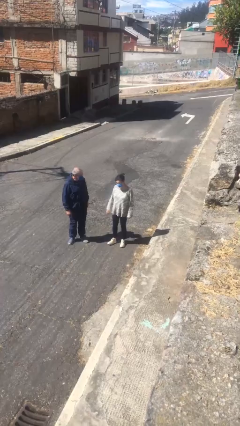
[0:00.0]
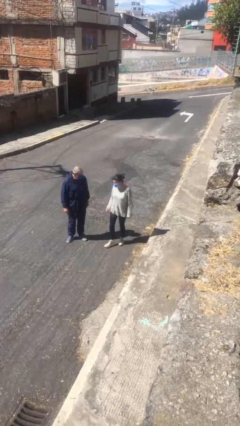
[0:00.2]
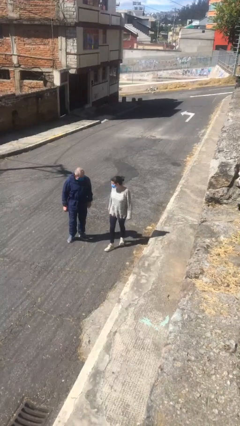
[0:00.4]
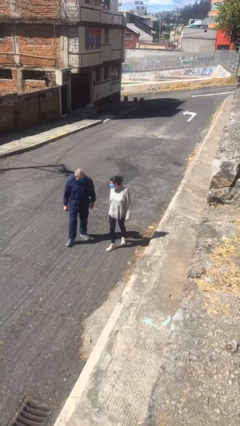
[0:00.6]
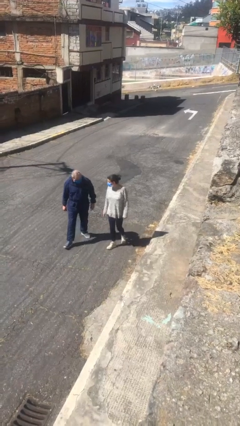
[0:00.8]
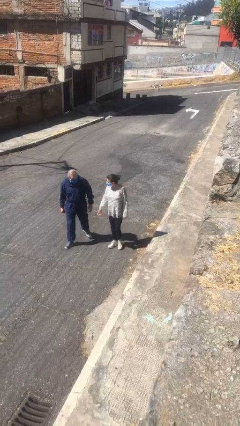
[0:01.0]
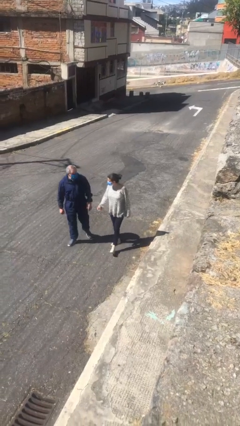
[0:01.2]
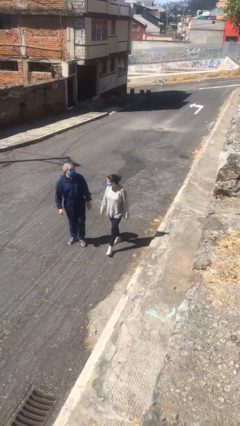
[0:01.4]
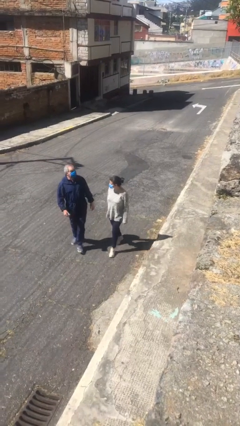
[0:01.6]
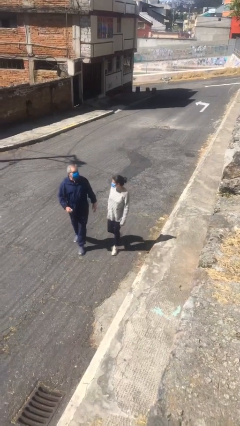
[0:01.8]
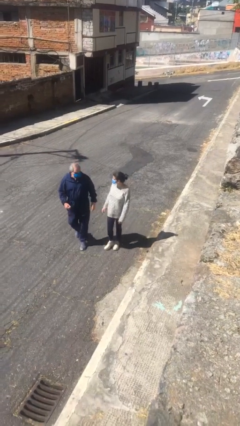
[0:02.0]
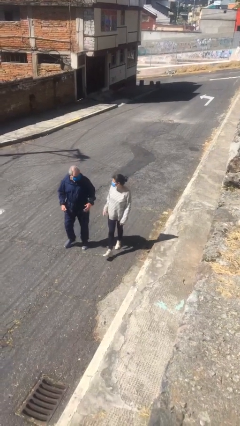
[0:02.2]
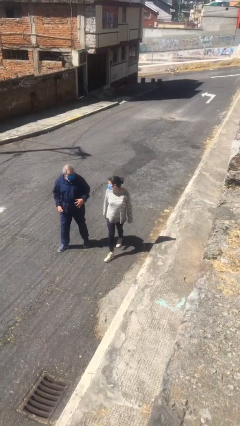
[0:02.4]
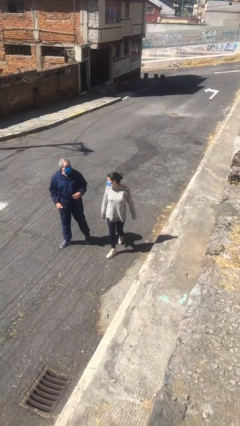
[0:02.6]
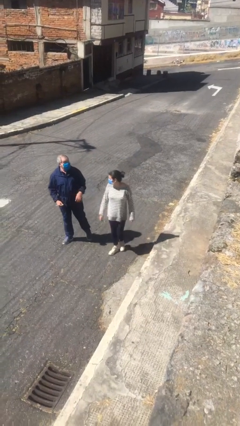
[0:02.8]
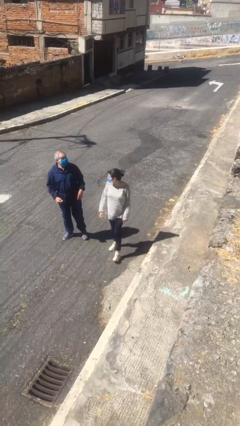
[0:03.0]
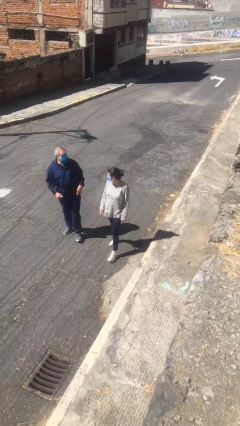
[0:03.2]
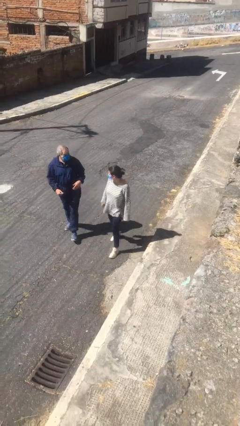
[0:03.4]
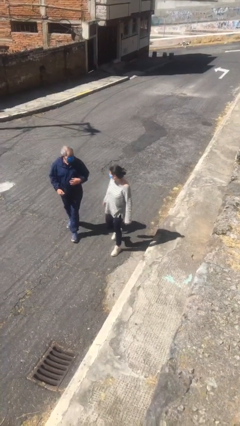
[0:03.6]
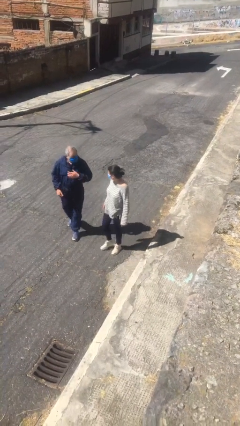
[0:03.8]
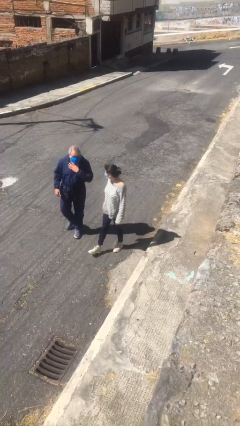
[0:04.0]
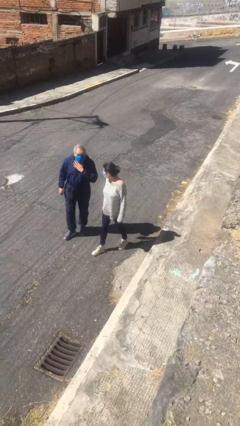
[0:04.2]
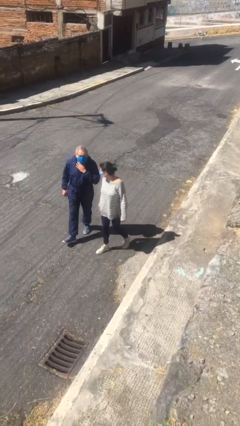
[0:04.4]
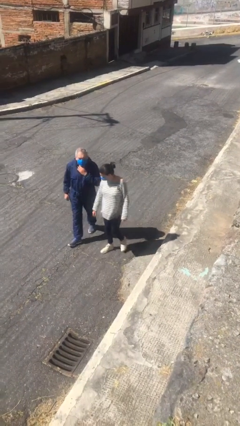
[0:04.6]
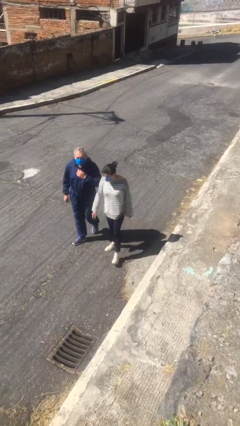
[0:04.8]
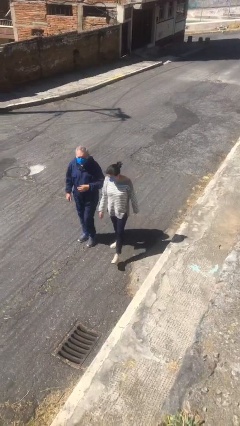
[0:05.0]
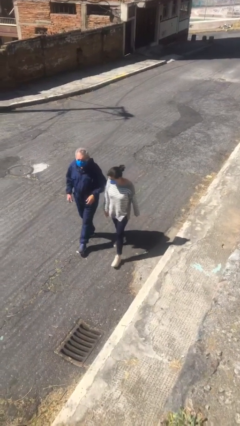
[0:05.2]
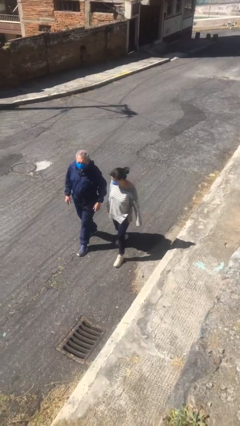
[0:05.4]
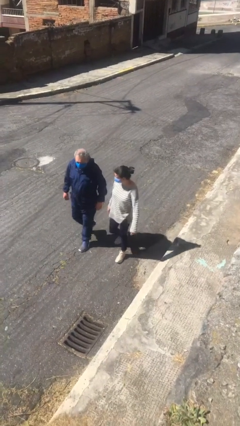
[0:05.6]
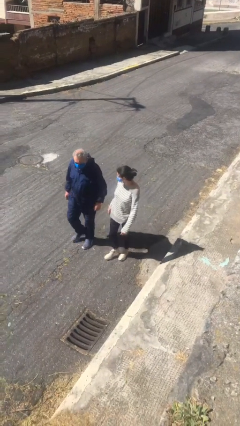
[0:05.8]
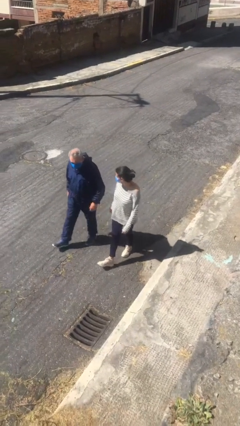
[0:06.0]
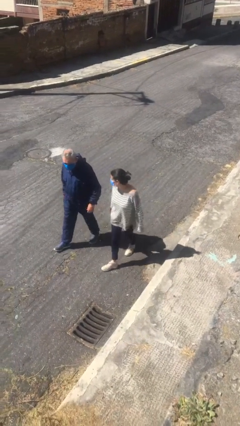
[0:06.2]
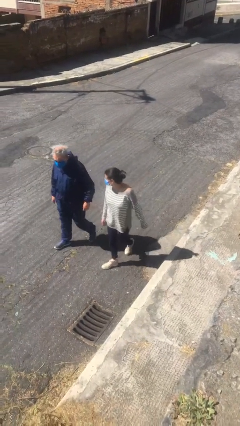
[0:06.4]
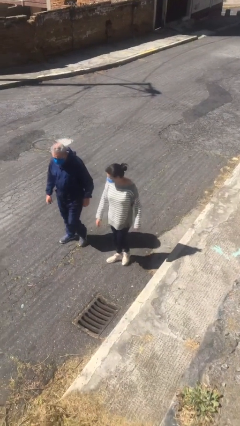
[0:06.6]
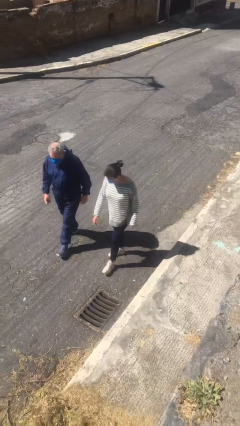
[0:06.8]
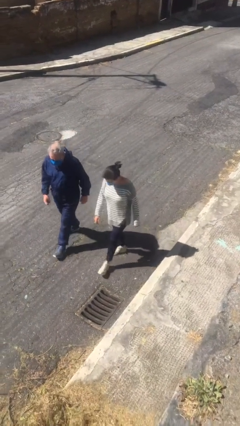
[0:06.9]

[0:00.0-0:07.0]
person talks to person

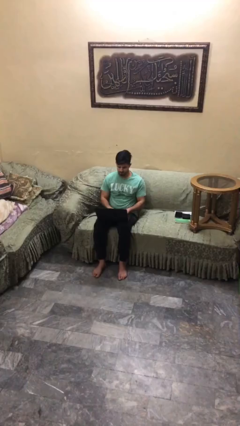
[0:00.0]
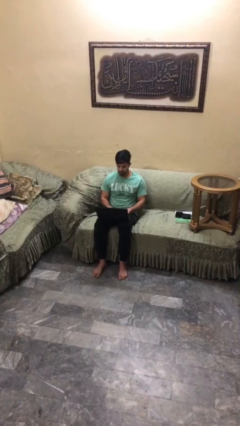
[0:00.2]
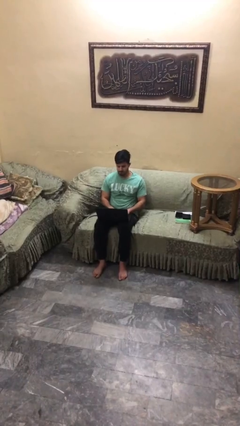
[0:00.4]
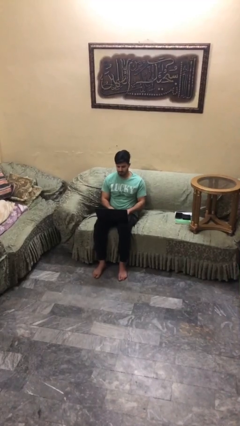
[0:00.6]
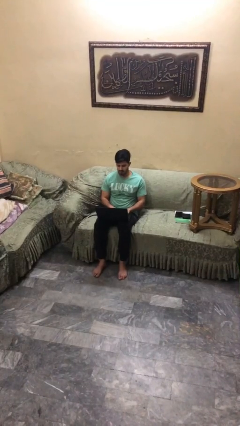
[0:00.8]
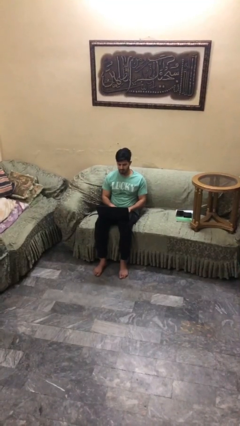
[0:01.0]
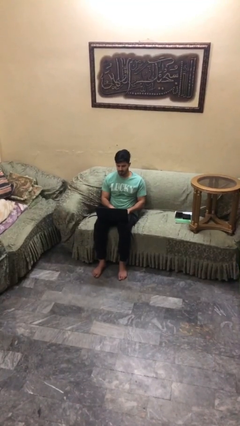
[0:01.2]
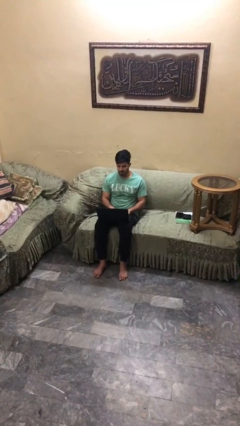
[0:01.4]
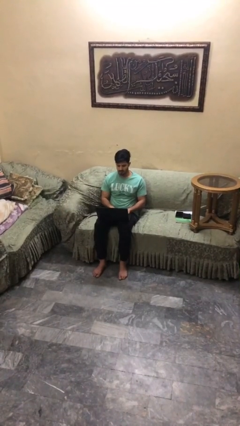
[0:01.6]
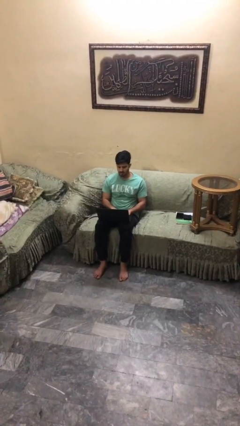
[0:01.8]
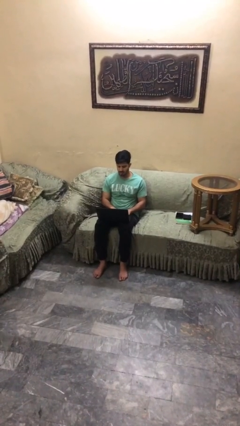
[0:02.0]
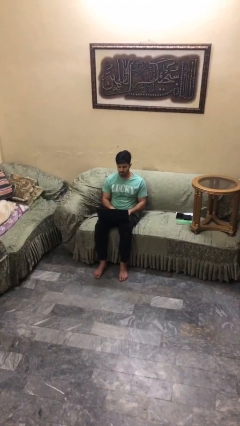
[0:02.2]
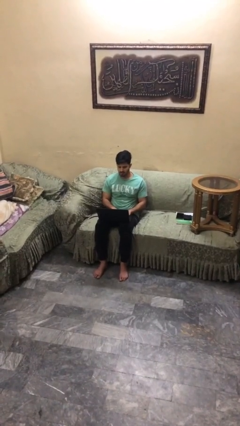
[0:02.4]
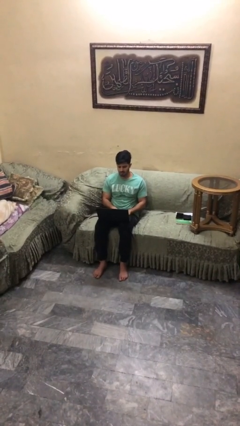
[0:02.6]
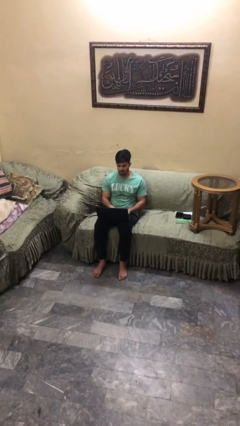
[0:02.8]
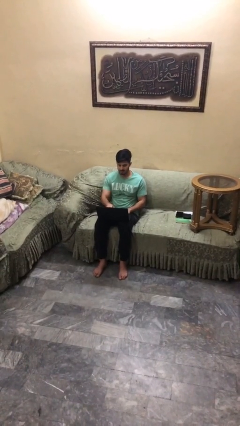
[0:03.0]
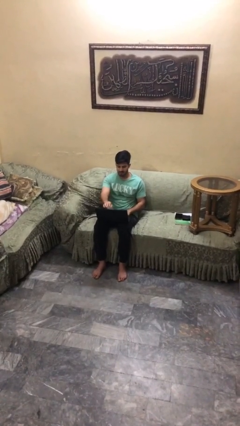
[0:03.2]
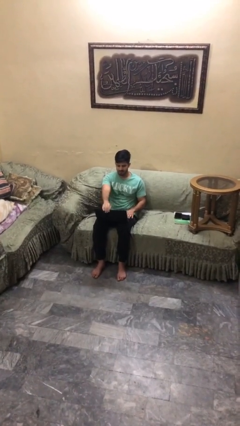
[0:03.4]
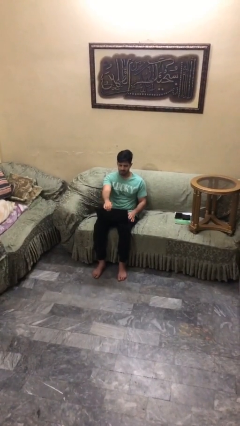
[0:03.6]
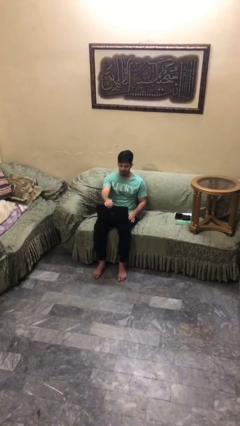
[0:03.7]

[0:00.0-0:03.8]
person interacts with laptop

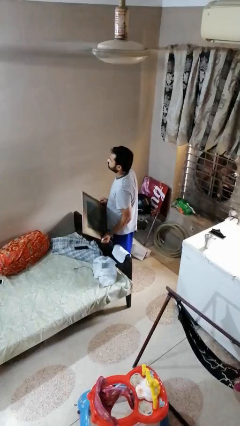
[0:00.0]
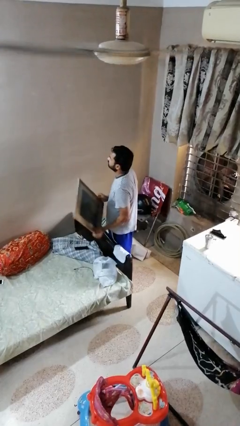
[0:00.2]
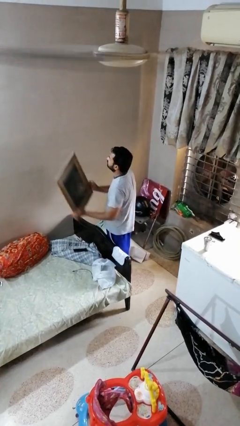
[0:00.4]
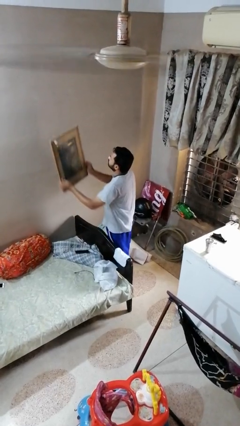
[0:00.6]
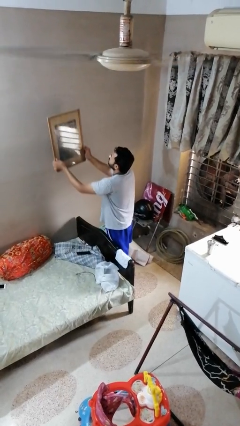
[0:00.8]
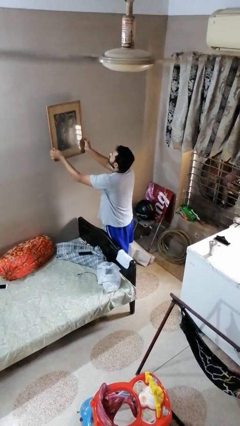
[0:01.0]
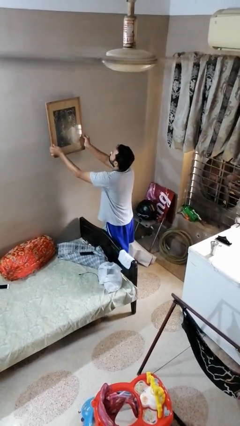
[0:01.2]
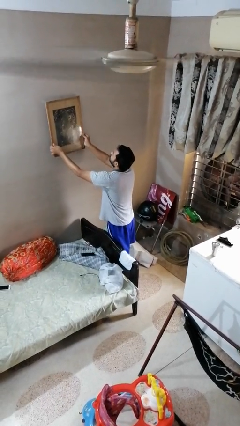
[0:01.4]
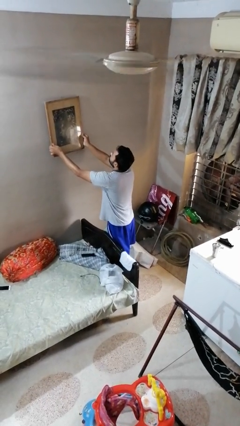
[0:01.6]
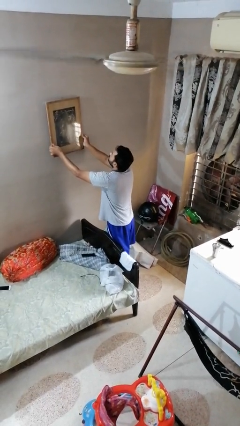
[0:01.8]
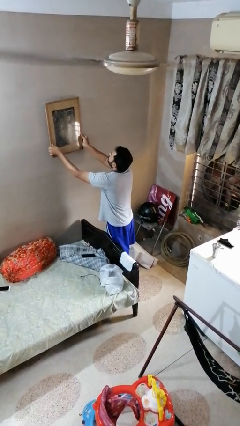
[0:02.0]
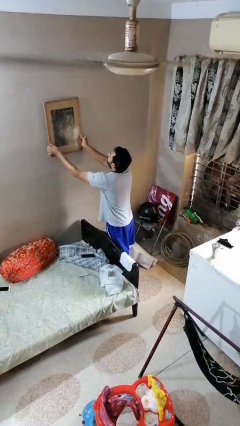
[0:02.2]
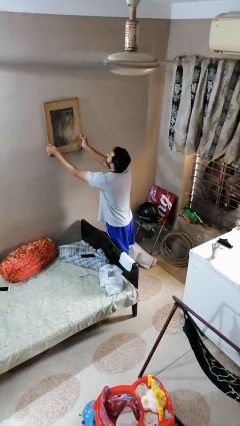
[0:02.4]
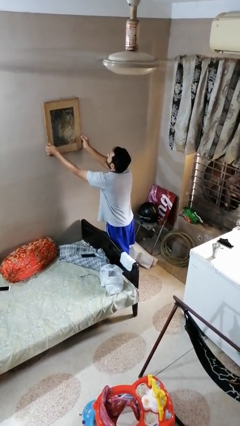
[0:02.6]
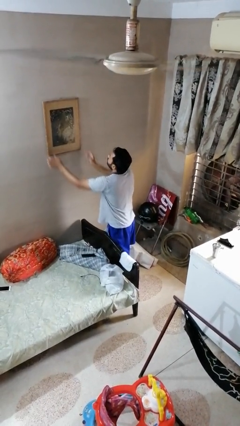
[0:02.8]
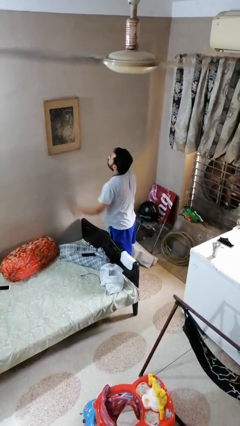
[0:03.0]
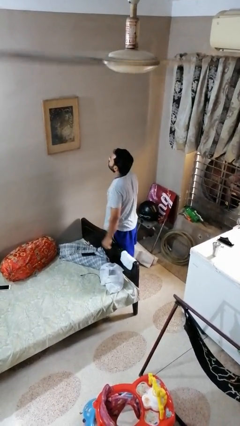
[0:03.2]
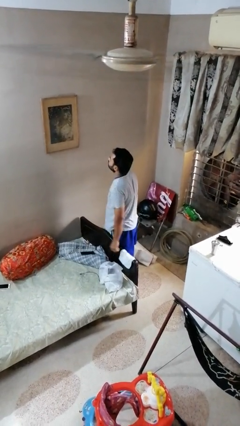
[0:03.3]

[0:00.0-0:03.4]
person puts up picture frame

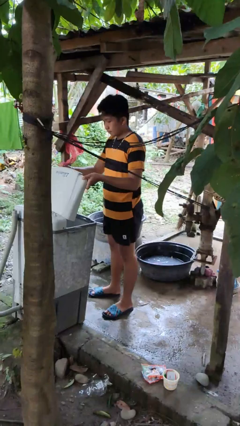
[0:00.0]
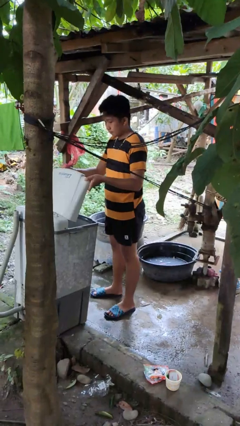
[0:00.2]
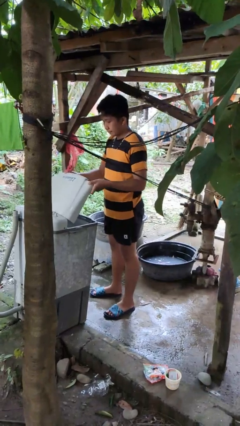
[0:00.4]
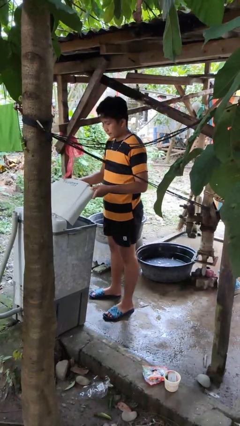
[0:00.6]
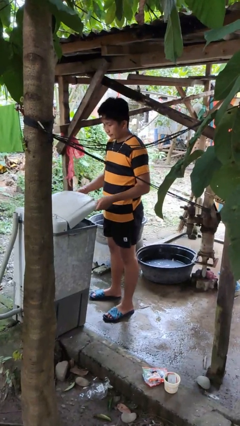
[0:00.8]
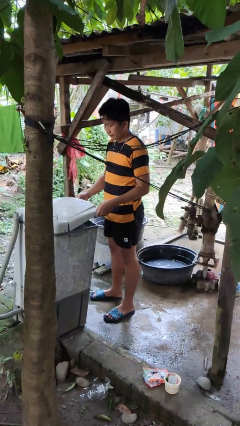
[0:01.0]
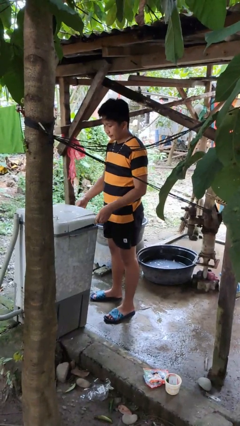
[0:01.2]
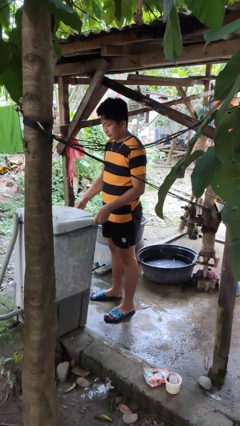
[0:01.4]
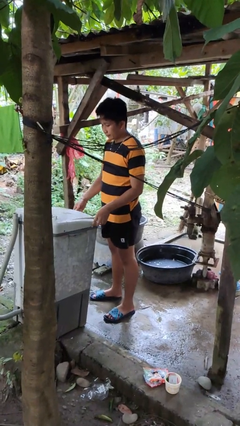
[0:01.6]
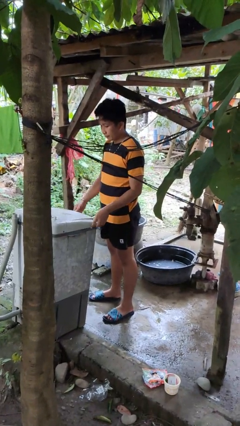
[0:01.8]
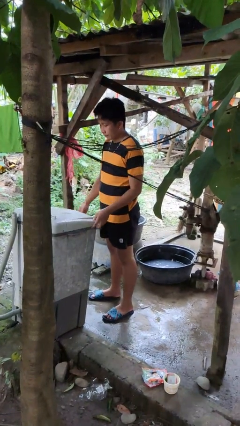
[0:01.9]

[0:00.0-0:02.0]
person closes clothes washer

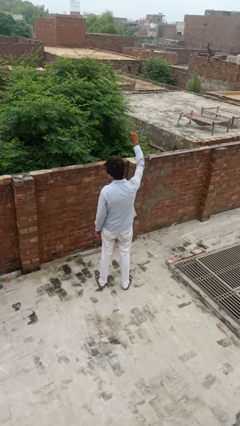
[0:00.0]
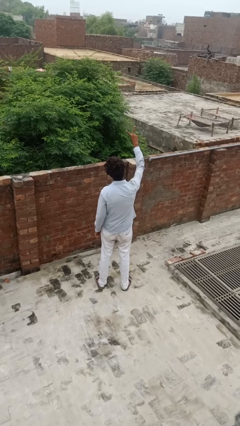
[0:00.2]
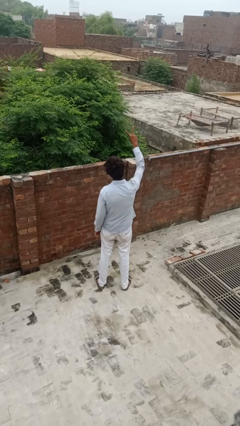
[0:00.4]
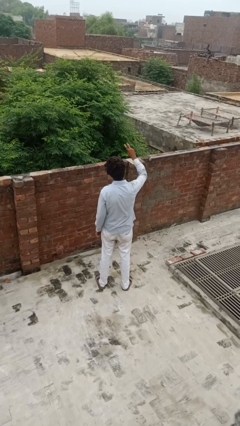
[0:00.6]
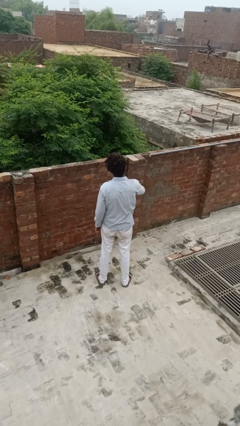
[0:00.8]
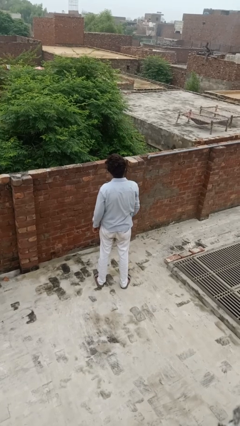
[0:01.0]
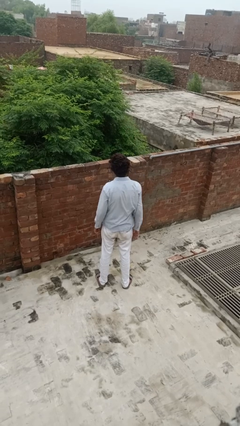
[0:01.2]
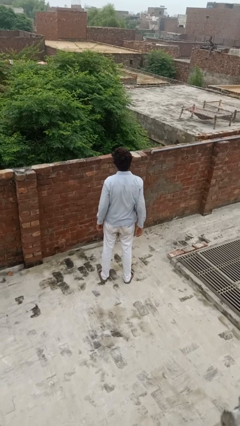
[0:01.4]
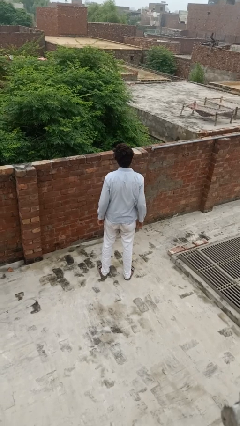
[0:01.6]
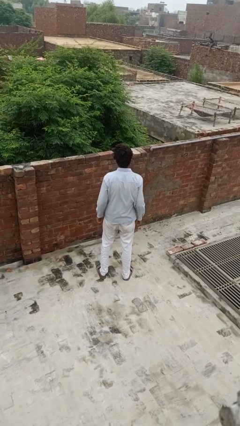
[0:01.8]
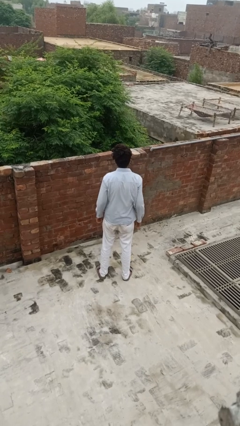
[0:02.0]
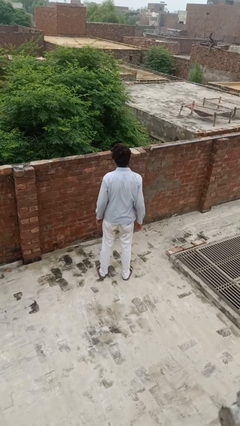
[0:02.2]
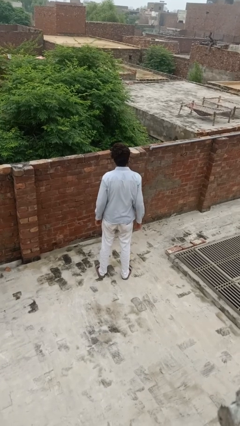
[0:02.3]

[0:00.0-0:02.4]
person gestures peace
